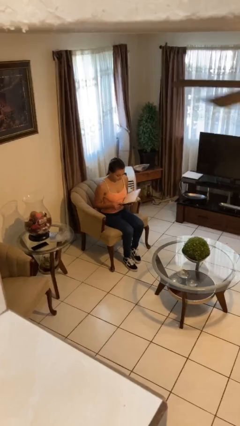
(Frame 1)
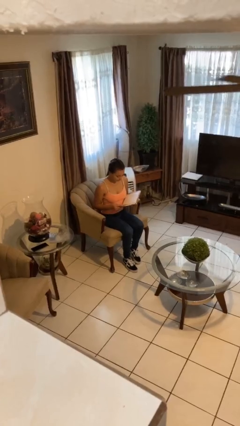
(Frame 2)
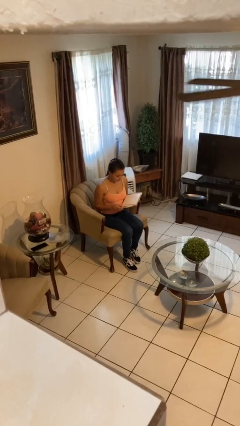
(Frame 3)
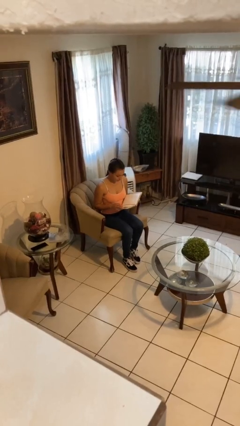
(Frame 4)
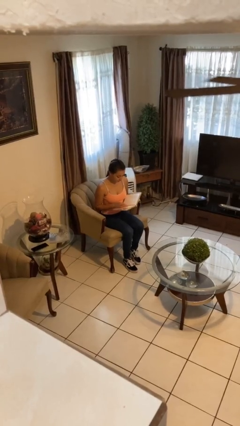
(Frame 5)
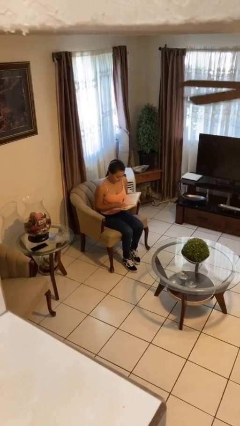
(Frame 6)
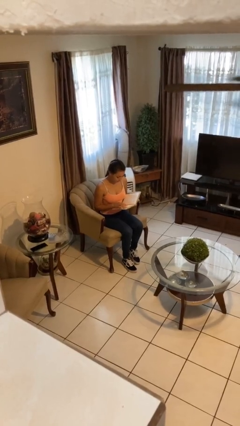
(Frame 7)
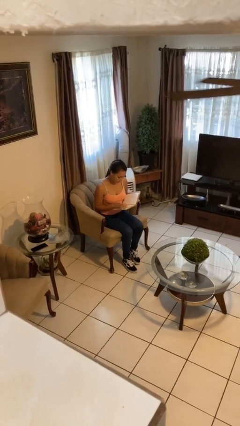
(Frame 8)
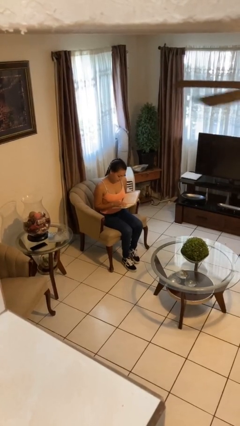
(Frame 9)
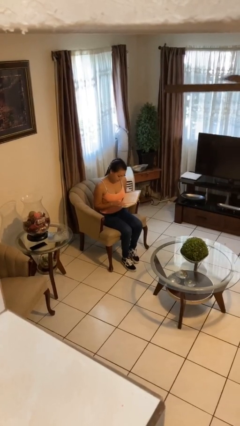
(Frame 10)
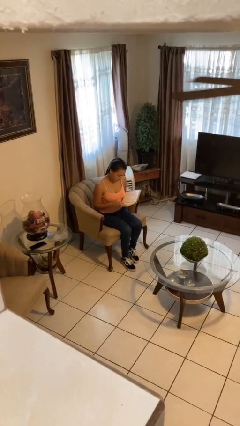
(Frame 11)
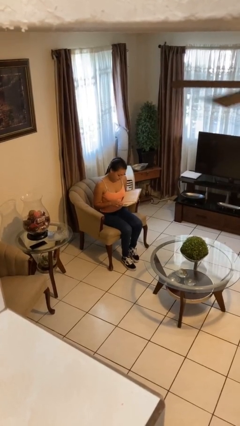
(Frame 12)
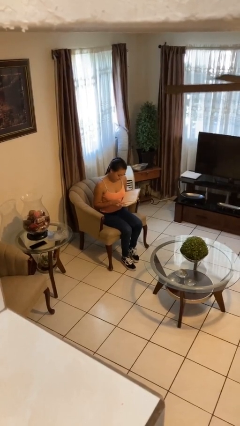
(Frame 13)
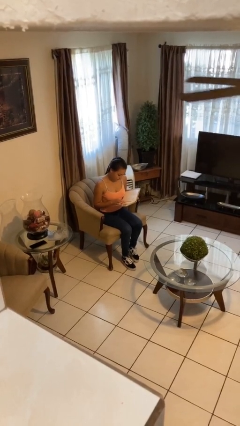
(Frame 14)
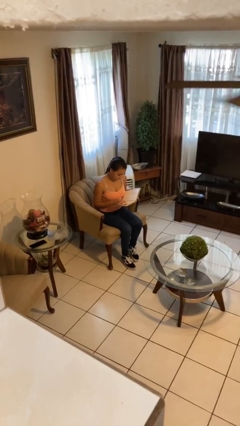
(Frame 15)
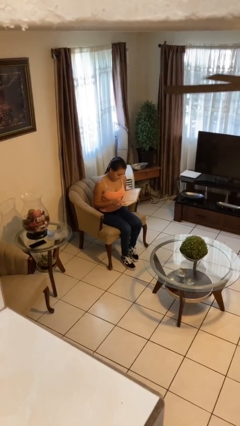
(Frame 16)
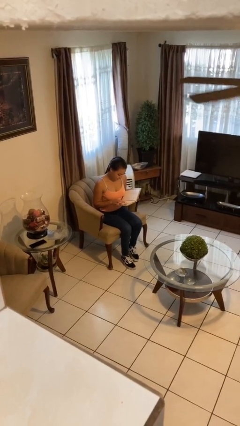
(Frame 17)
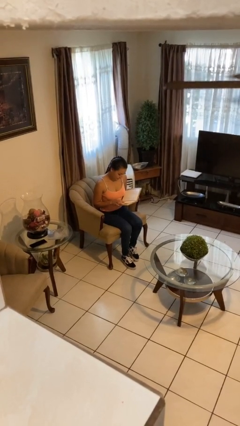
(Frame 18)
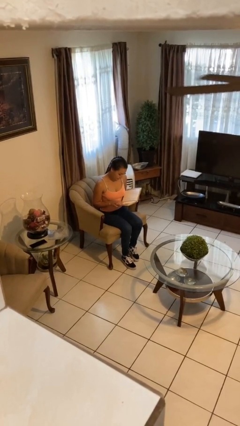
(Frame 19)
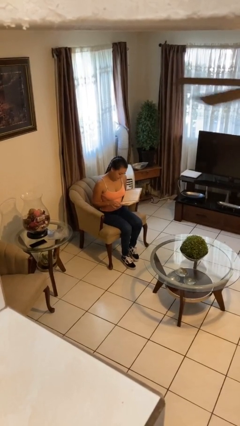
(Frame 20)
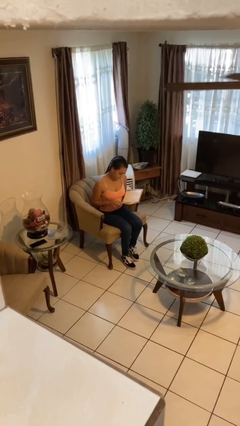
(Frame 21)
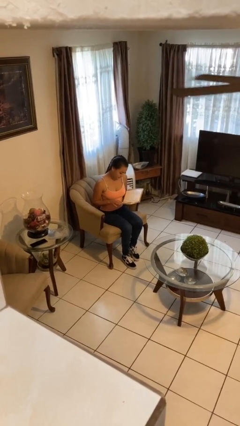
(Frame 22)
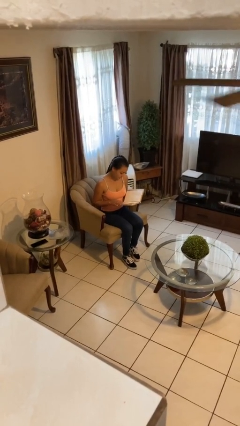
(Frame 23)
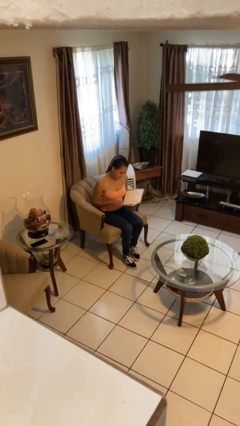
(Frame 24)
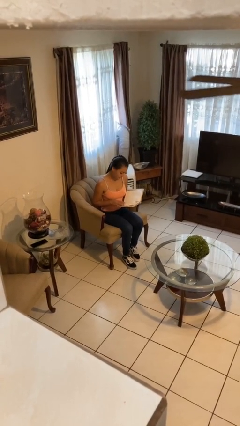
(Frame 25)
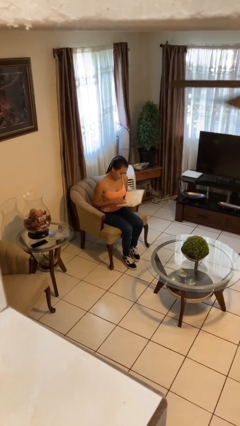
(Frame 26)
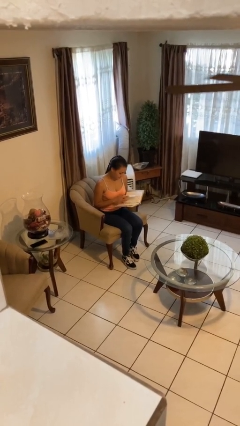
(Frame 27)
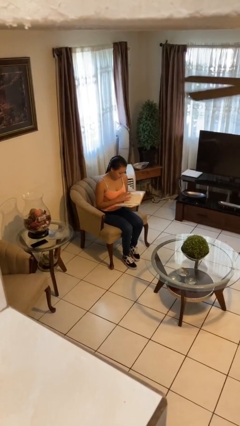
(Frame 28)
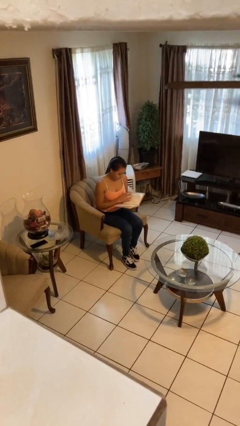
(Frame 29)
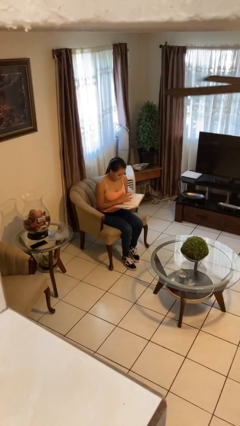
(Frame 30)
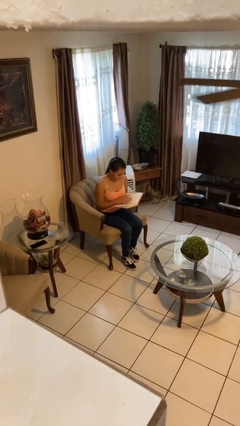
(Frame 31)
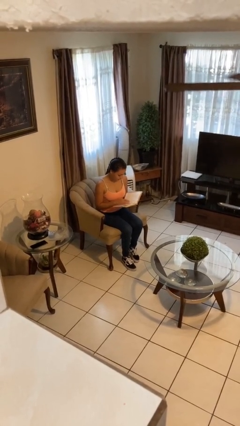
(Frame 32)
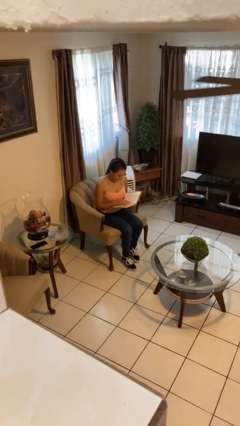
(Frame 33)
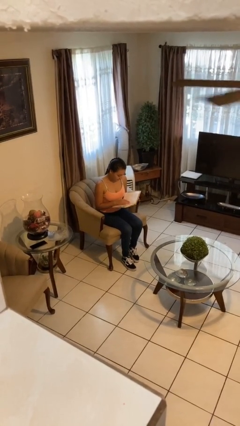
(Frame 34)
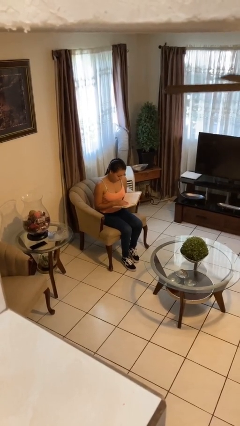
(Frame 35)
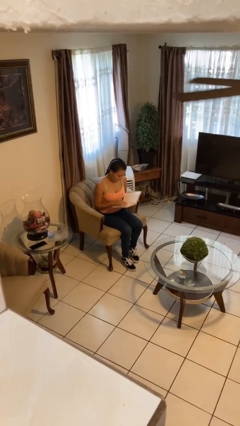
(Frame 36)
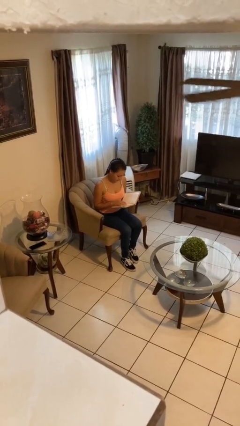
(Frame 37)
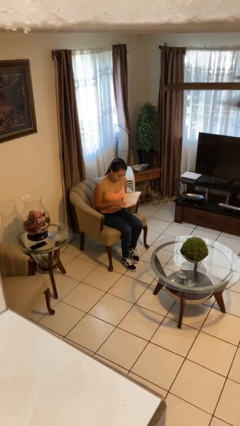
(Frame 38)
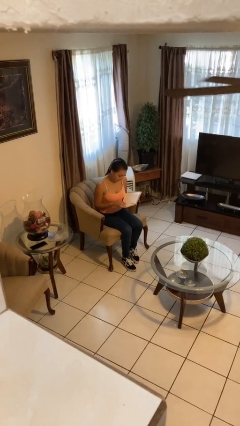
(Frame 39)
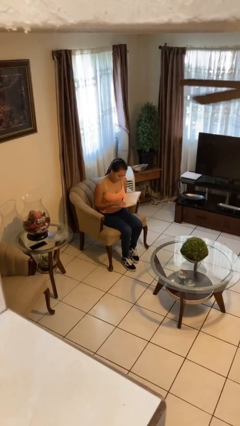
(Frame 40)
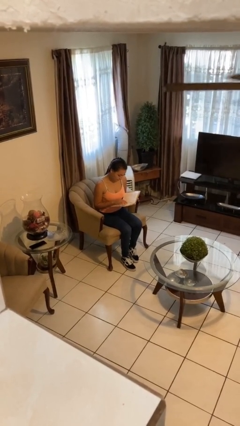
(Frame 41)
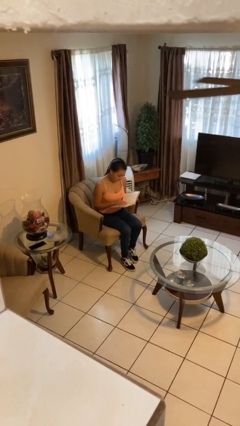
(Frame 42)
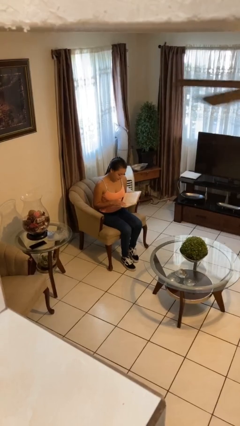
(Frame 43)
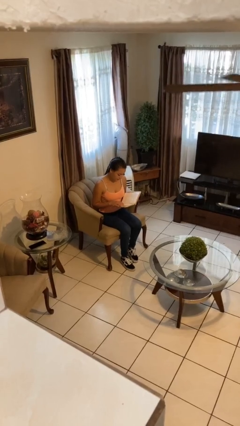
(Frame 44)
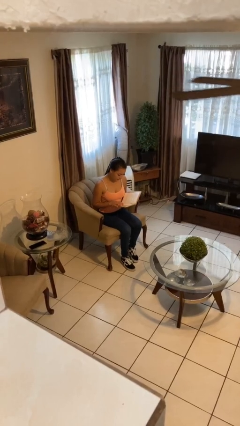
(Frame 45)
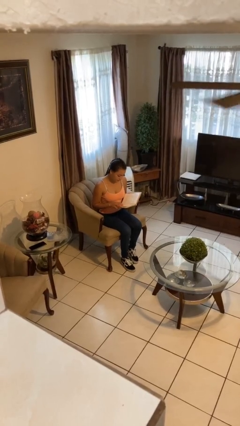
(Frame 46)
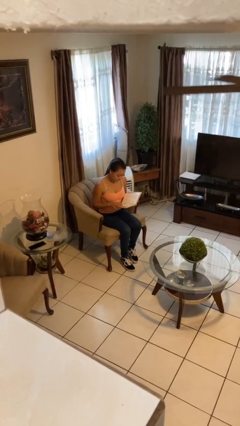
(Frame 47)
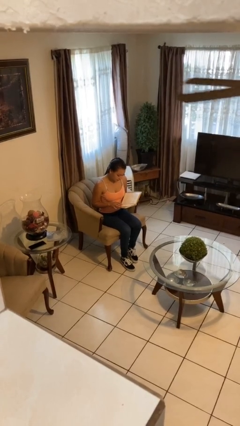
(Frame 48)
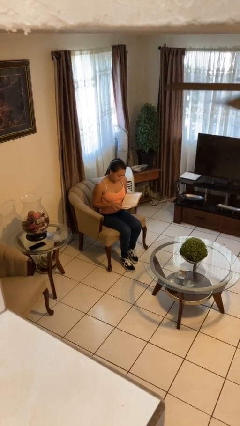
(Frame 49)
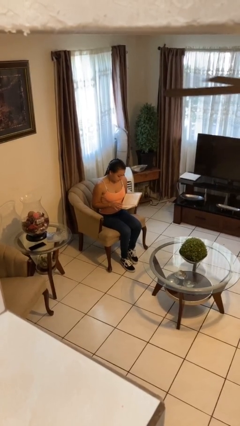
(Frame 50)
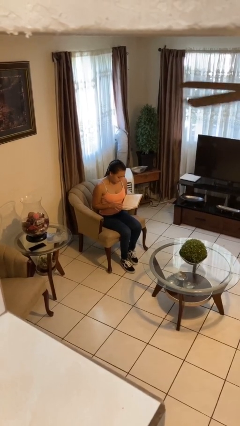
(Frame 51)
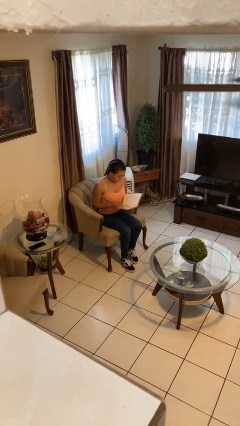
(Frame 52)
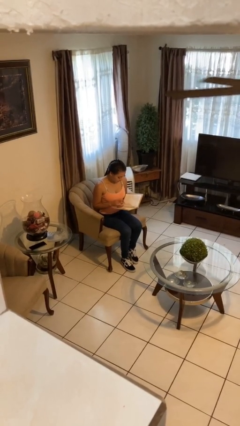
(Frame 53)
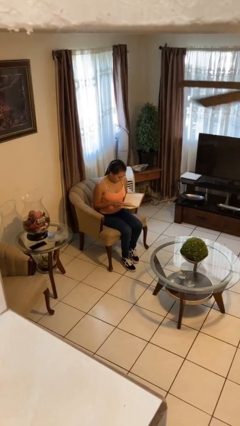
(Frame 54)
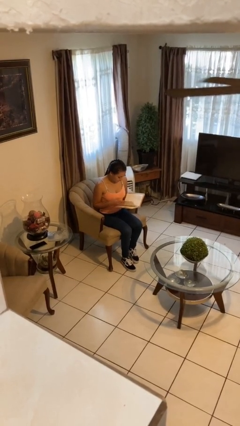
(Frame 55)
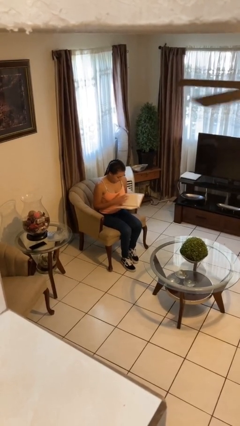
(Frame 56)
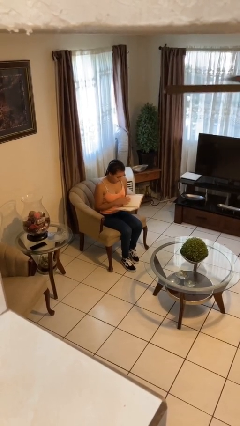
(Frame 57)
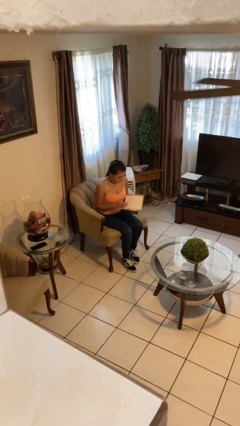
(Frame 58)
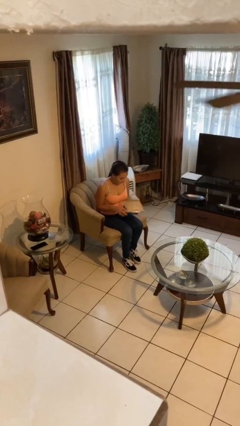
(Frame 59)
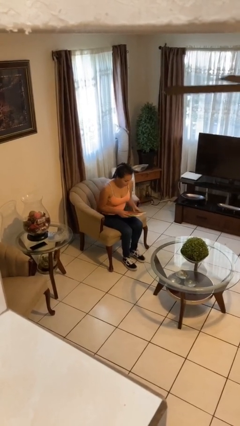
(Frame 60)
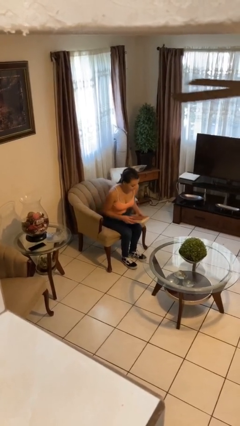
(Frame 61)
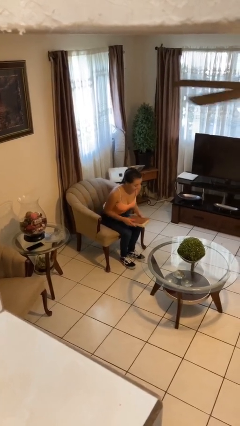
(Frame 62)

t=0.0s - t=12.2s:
person reads document

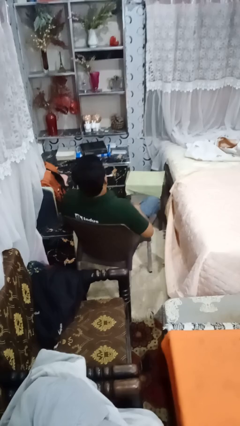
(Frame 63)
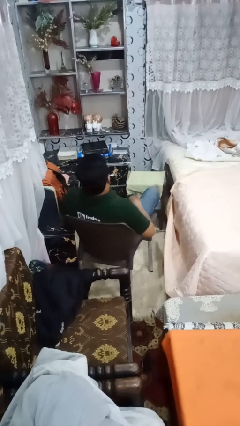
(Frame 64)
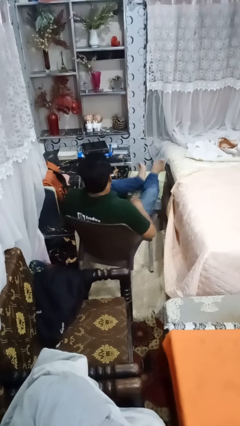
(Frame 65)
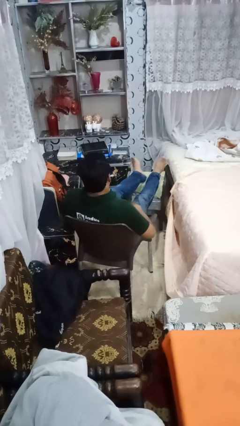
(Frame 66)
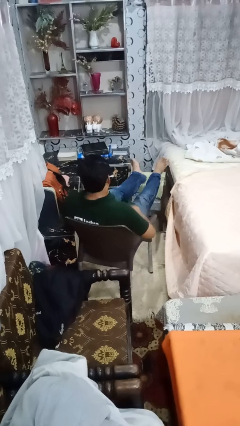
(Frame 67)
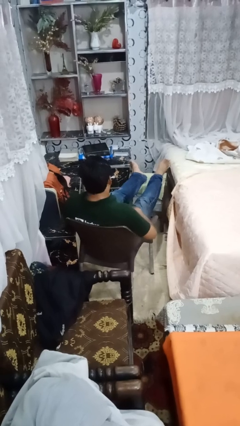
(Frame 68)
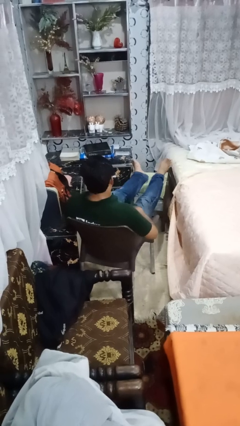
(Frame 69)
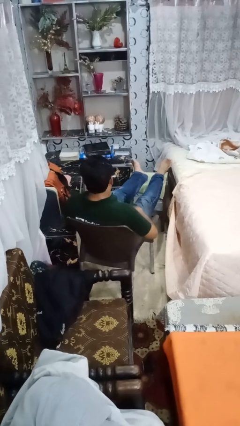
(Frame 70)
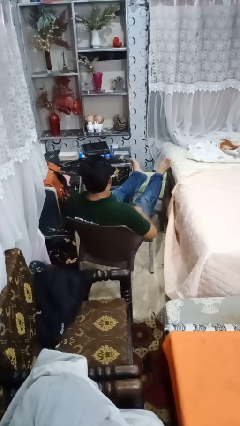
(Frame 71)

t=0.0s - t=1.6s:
person puts feet up

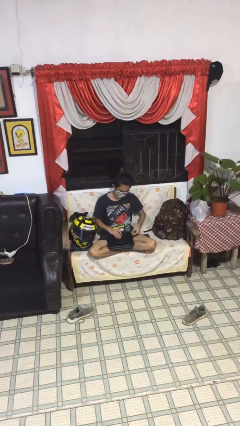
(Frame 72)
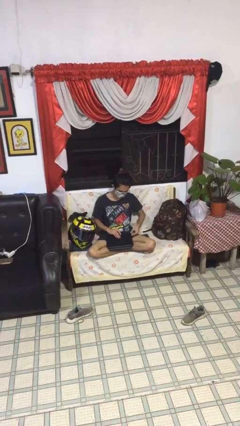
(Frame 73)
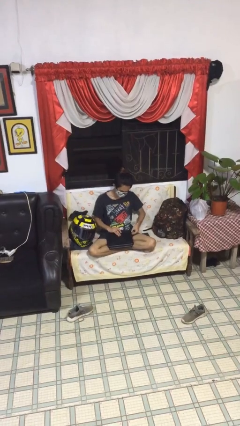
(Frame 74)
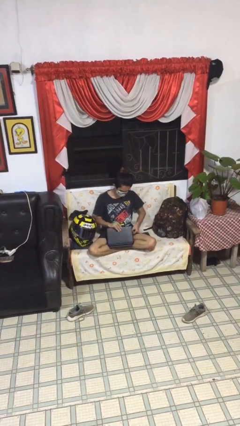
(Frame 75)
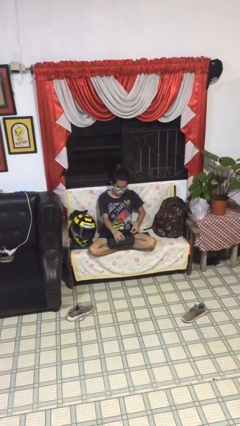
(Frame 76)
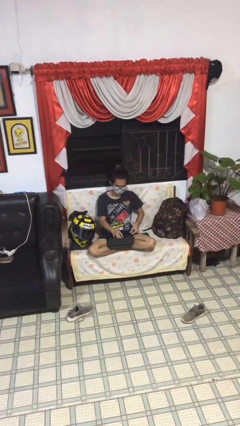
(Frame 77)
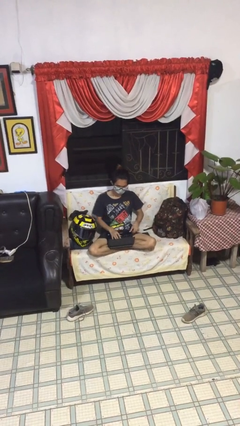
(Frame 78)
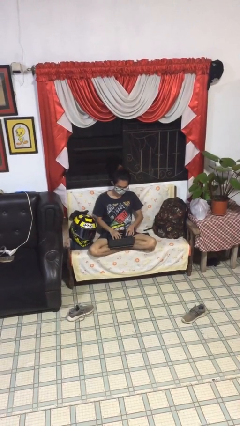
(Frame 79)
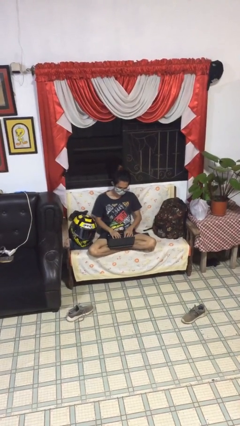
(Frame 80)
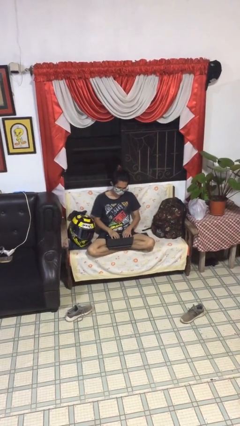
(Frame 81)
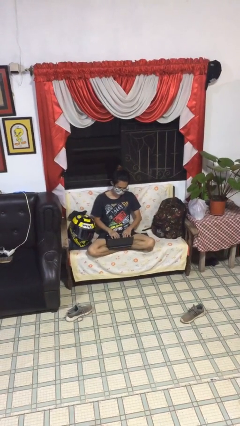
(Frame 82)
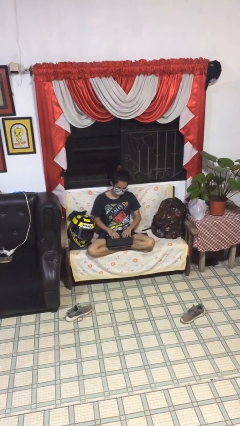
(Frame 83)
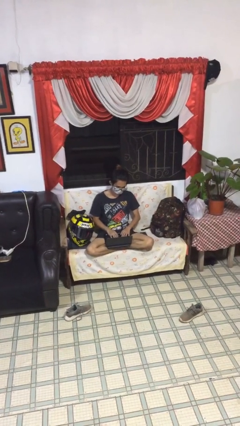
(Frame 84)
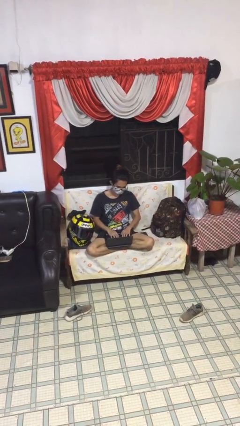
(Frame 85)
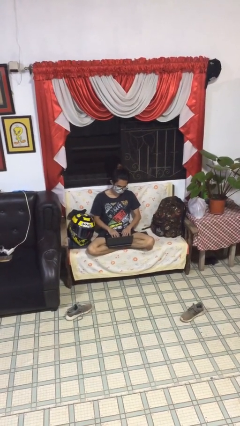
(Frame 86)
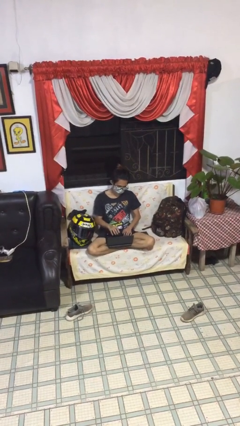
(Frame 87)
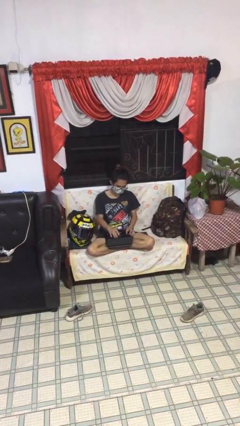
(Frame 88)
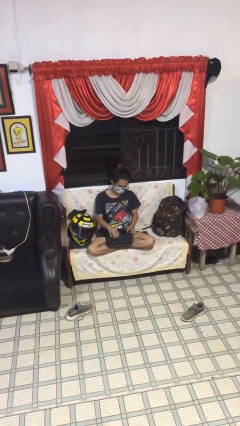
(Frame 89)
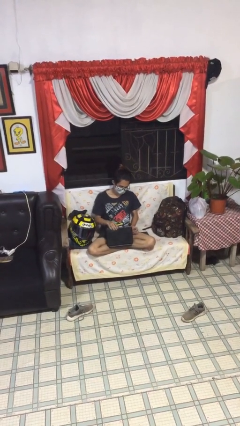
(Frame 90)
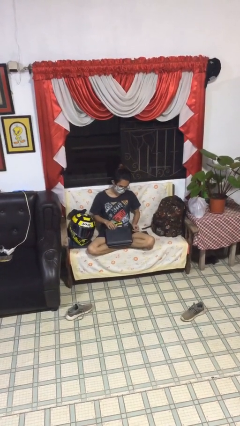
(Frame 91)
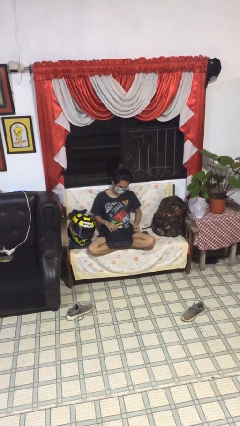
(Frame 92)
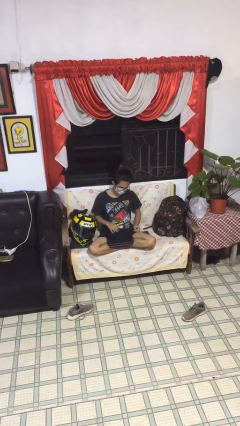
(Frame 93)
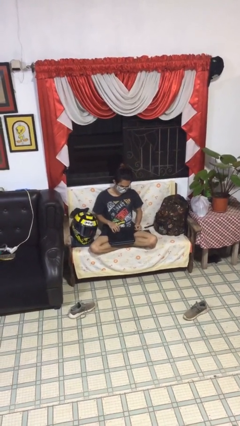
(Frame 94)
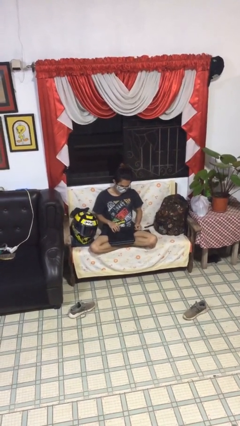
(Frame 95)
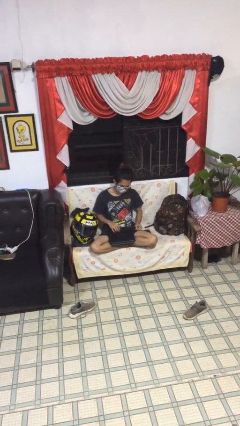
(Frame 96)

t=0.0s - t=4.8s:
person interacts with laptop
